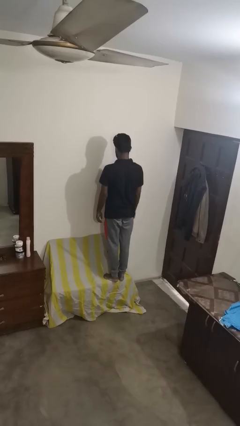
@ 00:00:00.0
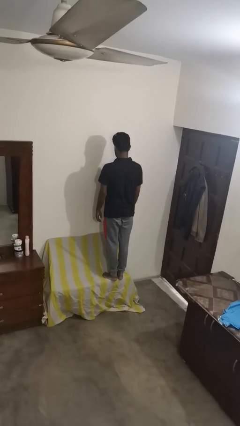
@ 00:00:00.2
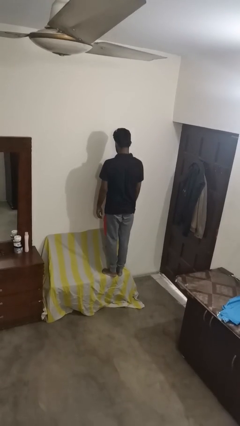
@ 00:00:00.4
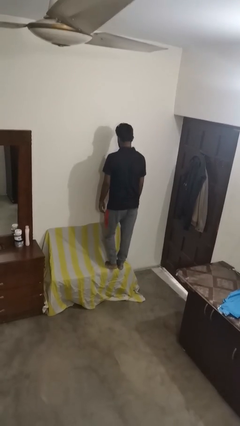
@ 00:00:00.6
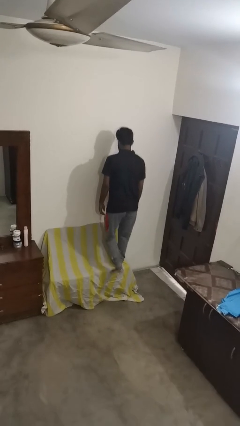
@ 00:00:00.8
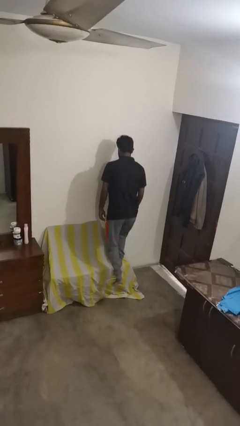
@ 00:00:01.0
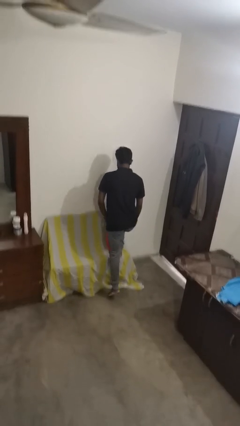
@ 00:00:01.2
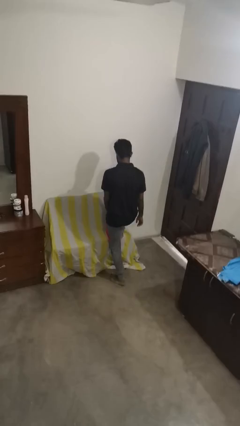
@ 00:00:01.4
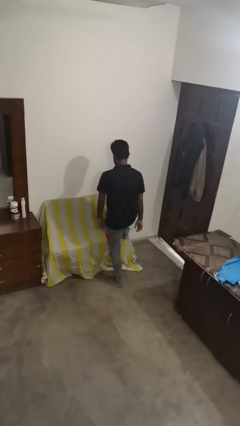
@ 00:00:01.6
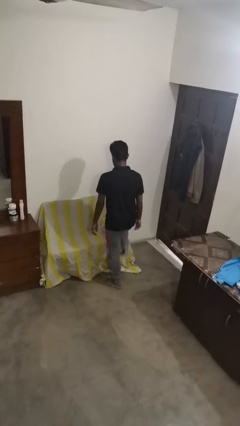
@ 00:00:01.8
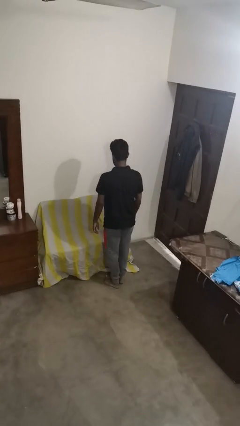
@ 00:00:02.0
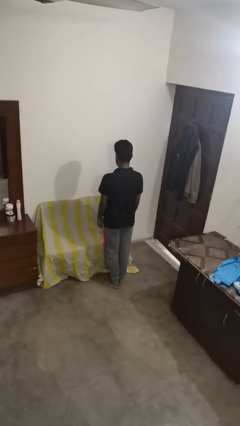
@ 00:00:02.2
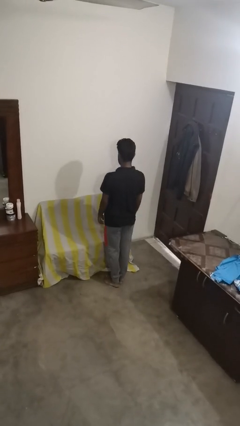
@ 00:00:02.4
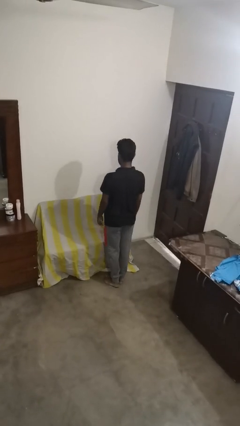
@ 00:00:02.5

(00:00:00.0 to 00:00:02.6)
person climbs off couch

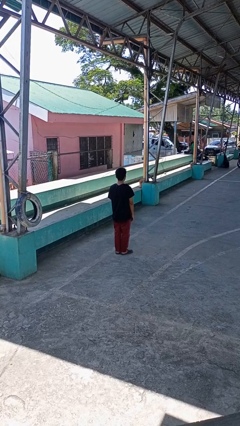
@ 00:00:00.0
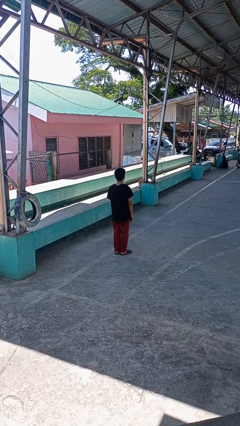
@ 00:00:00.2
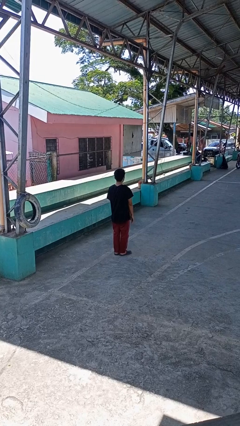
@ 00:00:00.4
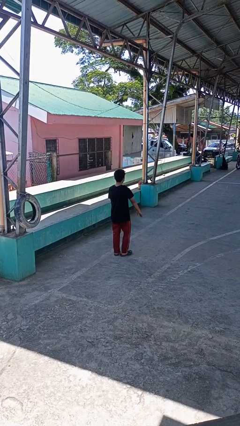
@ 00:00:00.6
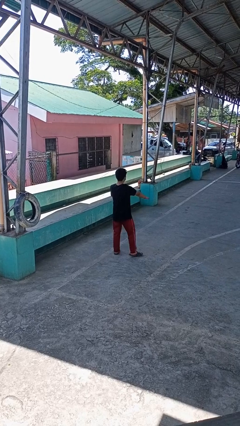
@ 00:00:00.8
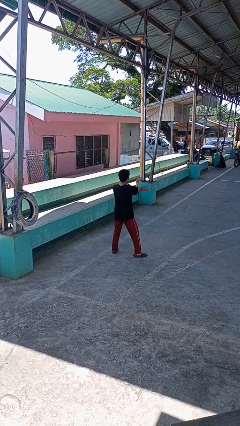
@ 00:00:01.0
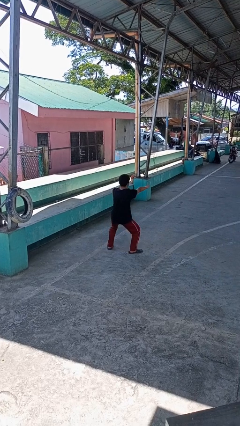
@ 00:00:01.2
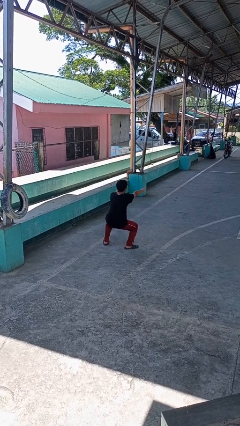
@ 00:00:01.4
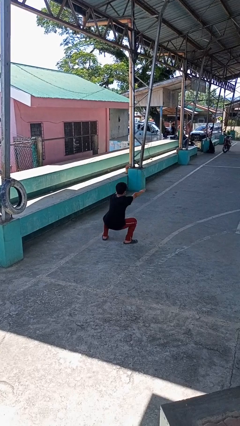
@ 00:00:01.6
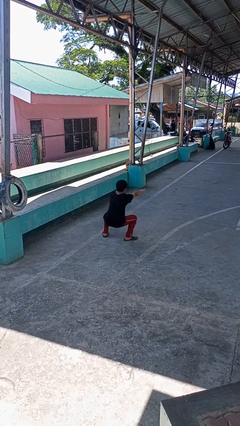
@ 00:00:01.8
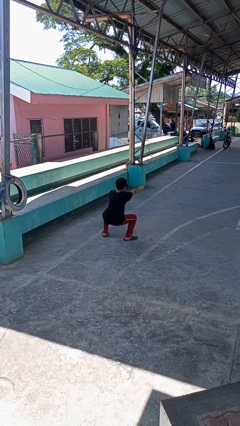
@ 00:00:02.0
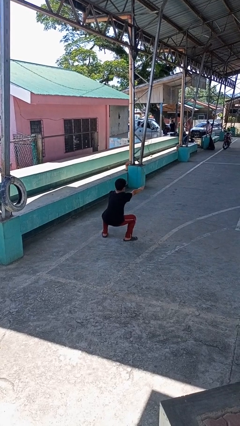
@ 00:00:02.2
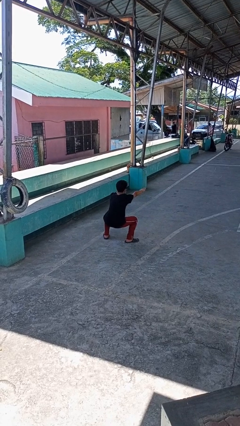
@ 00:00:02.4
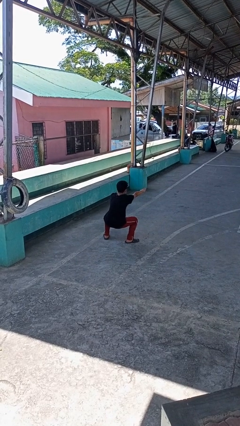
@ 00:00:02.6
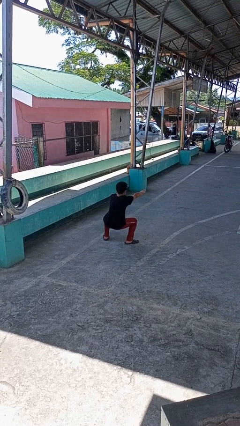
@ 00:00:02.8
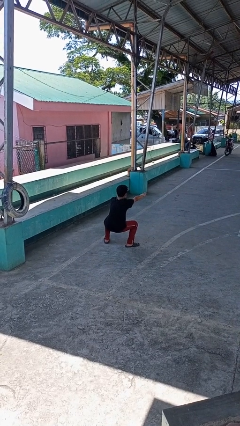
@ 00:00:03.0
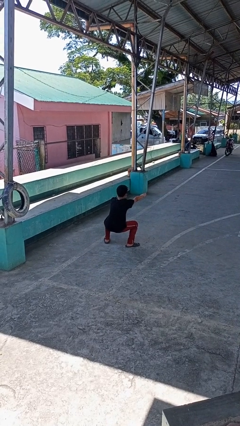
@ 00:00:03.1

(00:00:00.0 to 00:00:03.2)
person squats

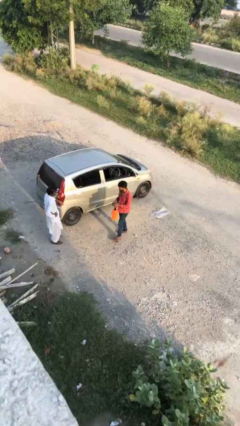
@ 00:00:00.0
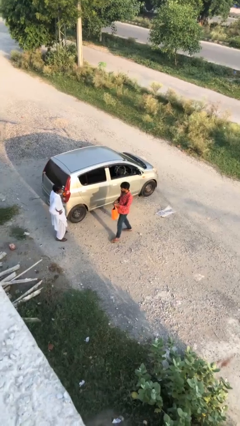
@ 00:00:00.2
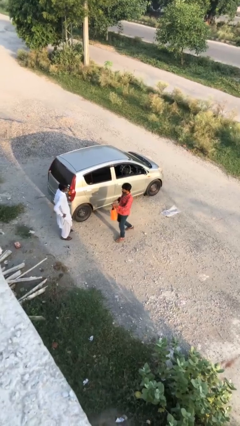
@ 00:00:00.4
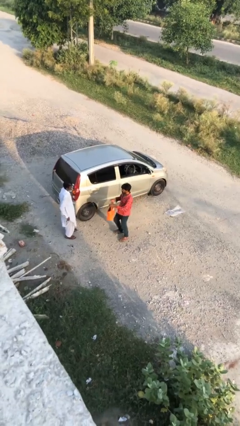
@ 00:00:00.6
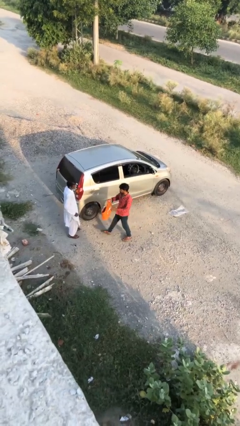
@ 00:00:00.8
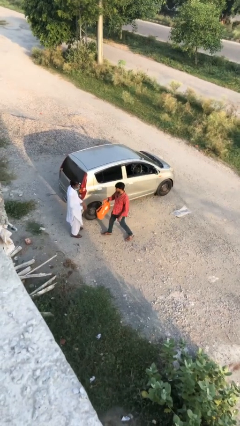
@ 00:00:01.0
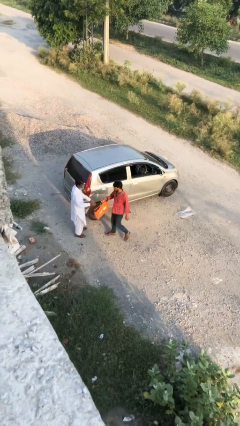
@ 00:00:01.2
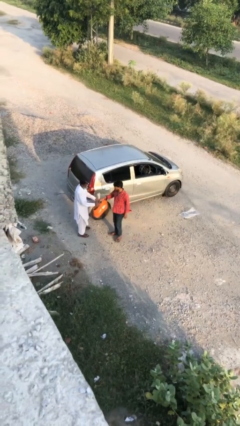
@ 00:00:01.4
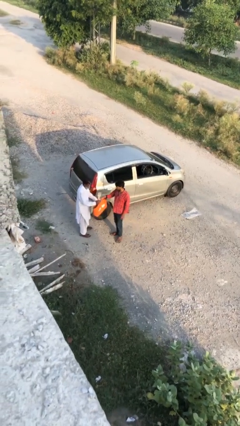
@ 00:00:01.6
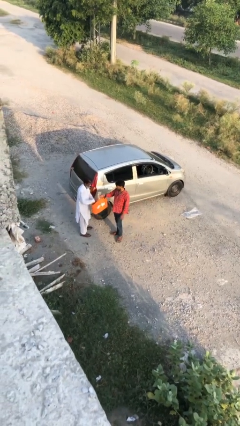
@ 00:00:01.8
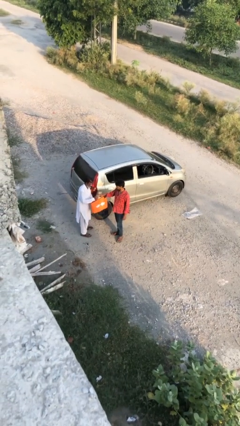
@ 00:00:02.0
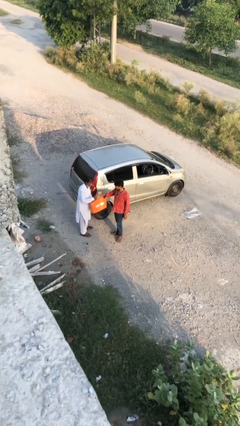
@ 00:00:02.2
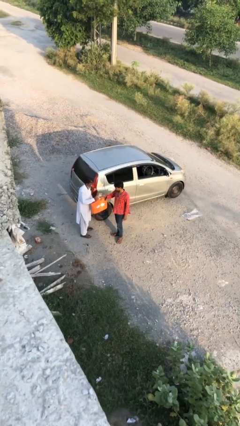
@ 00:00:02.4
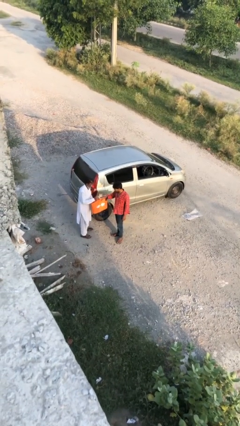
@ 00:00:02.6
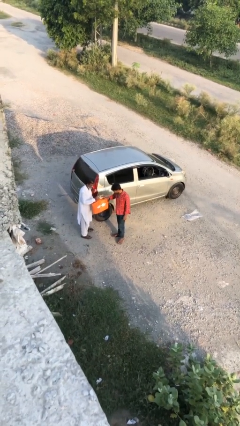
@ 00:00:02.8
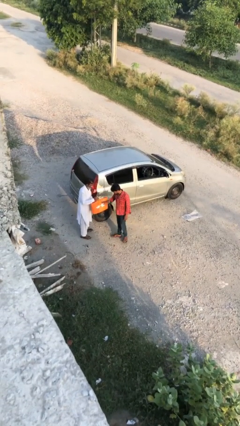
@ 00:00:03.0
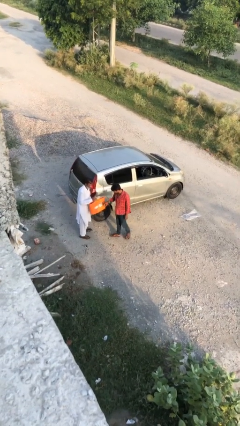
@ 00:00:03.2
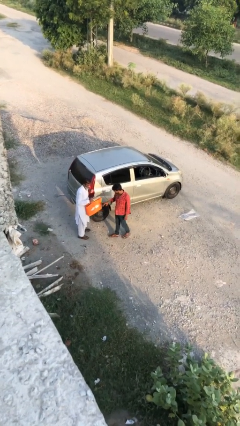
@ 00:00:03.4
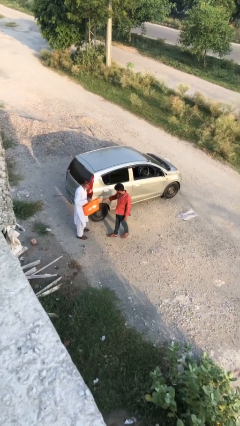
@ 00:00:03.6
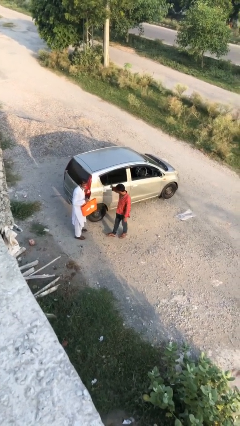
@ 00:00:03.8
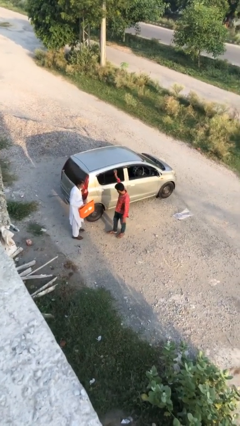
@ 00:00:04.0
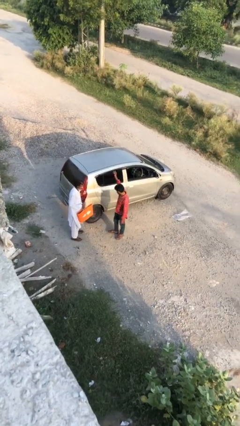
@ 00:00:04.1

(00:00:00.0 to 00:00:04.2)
person transfers object to person

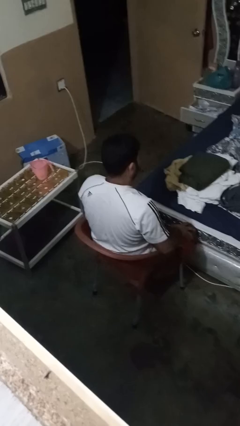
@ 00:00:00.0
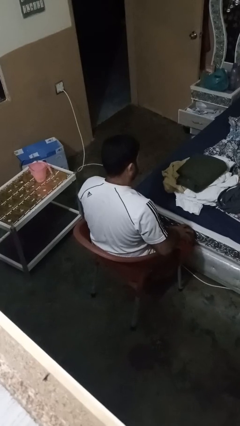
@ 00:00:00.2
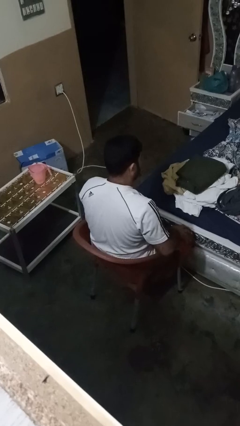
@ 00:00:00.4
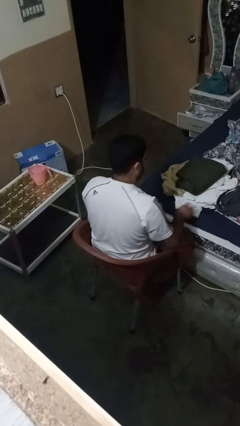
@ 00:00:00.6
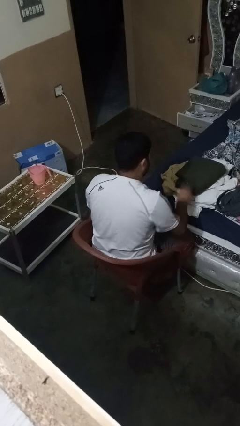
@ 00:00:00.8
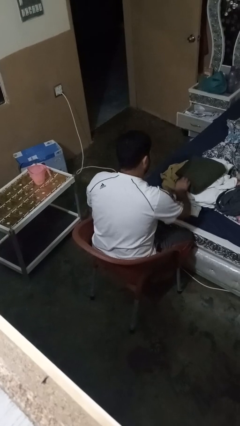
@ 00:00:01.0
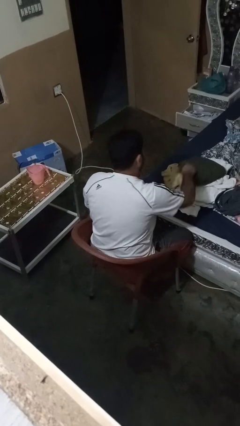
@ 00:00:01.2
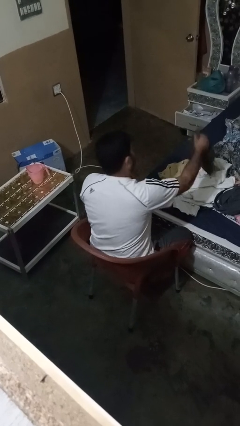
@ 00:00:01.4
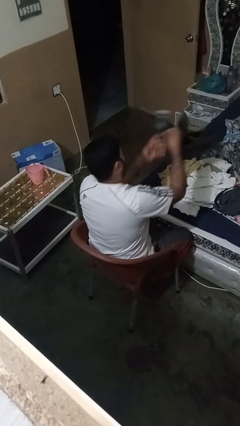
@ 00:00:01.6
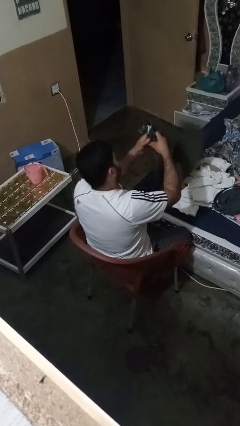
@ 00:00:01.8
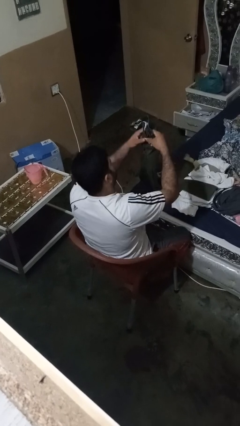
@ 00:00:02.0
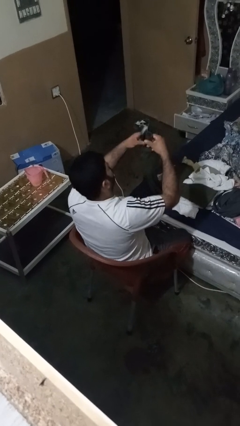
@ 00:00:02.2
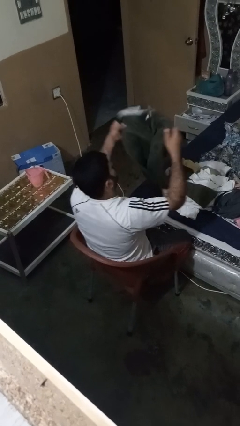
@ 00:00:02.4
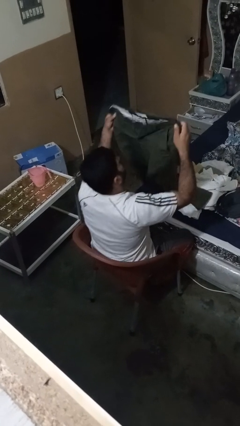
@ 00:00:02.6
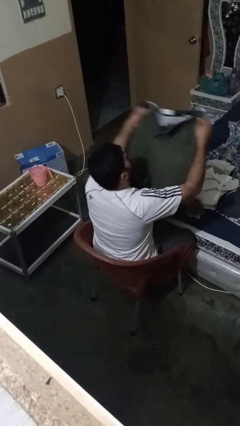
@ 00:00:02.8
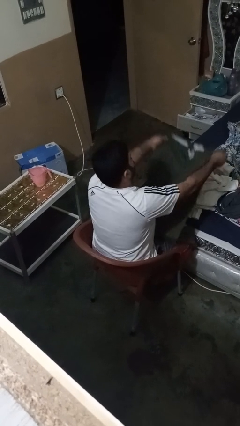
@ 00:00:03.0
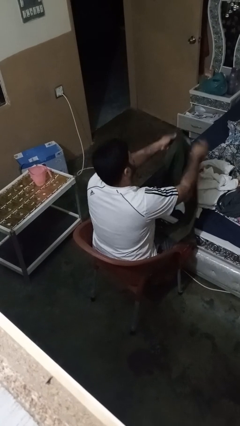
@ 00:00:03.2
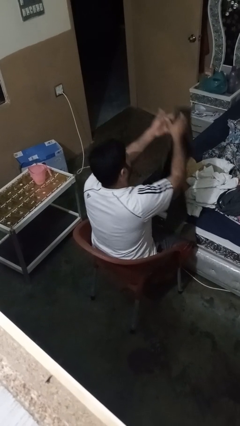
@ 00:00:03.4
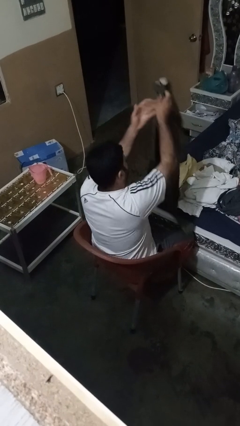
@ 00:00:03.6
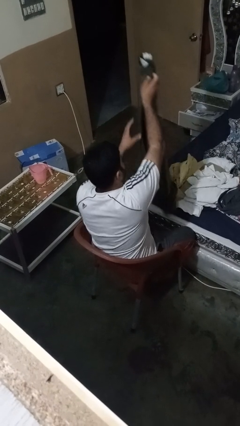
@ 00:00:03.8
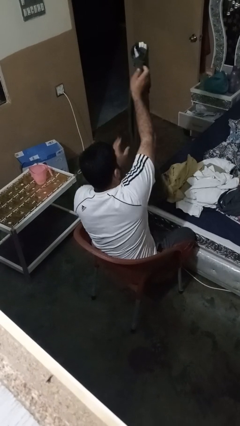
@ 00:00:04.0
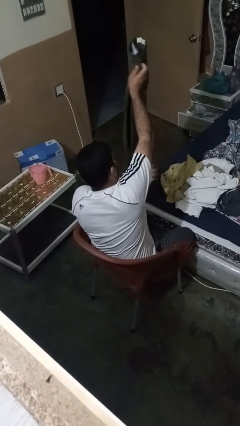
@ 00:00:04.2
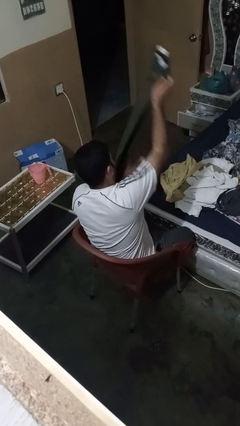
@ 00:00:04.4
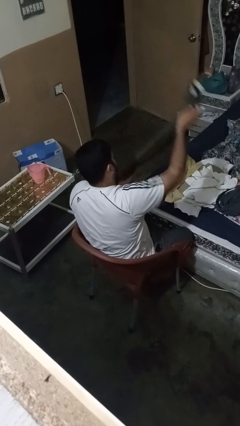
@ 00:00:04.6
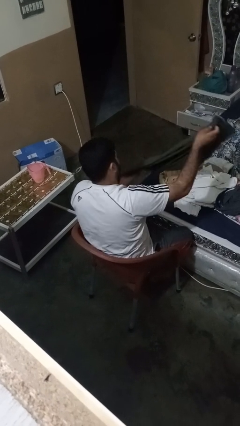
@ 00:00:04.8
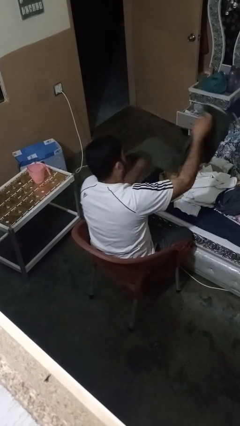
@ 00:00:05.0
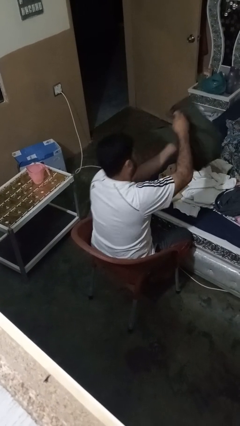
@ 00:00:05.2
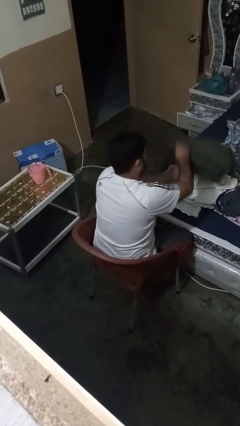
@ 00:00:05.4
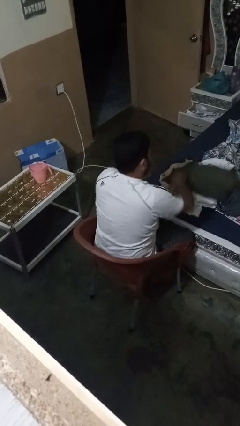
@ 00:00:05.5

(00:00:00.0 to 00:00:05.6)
person folds pants

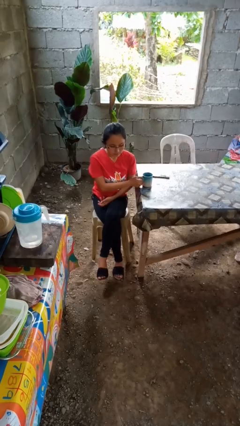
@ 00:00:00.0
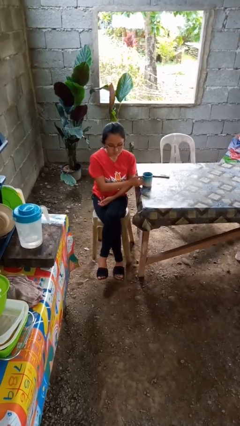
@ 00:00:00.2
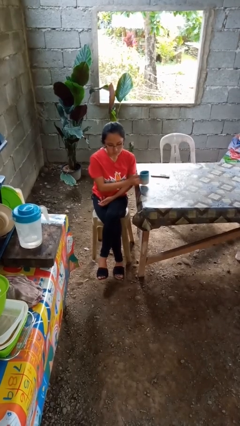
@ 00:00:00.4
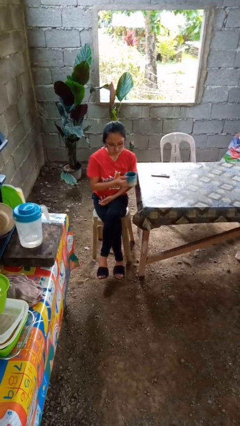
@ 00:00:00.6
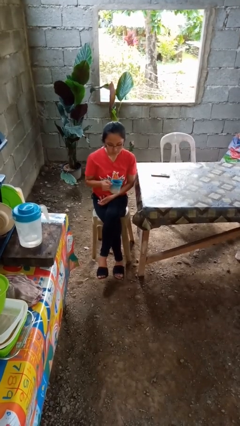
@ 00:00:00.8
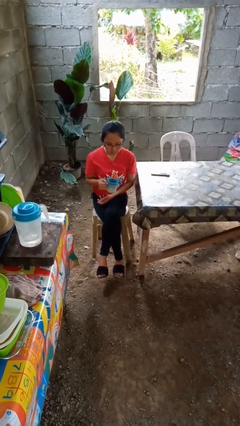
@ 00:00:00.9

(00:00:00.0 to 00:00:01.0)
person picks up object from table

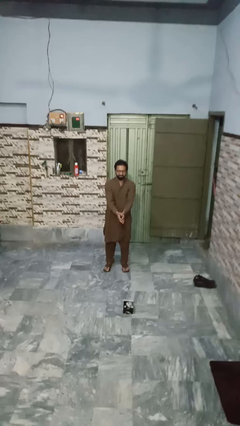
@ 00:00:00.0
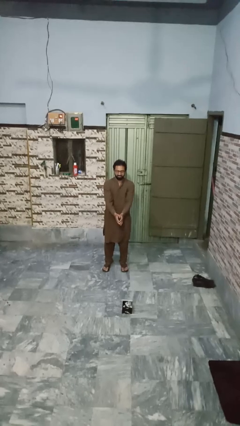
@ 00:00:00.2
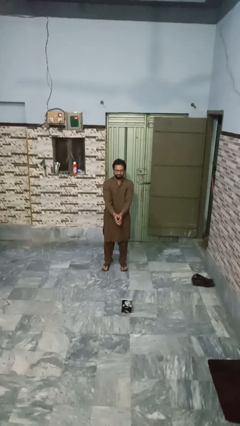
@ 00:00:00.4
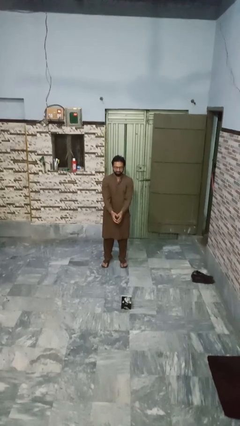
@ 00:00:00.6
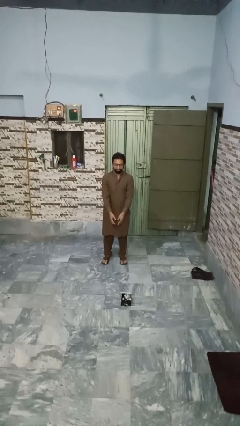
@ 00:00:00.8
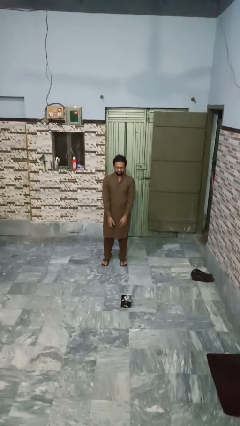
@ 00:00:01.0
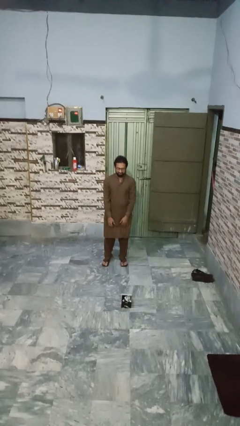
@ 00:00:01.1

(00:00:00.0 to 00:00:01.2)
person catches dropped object
